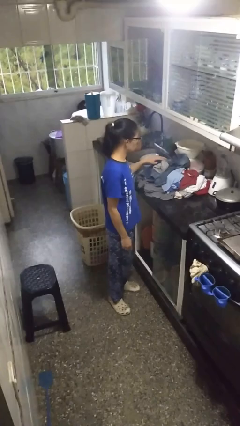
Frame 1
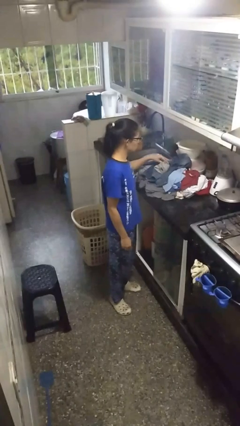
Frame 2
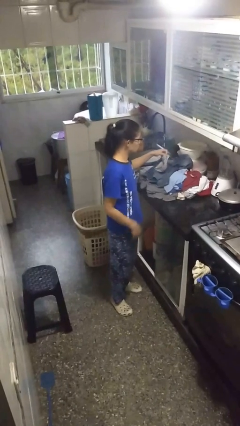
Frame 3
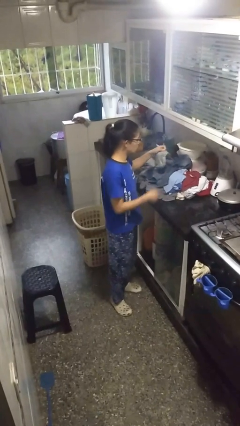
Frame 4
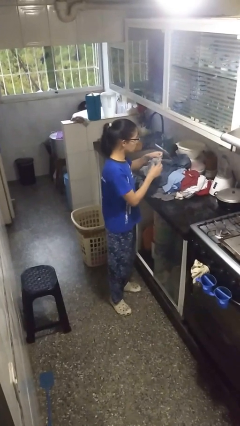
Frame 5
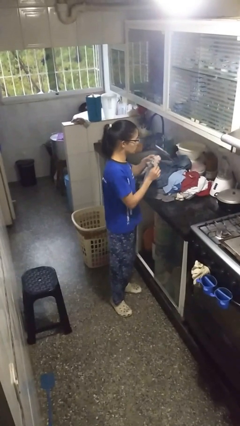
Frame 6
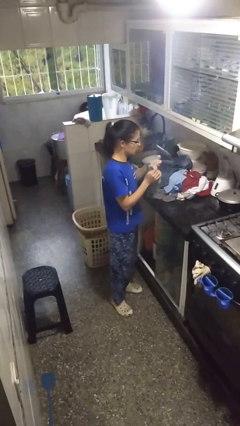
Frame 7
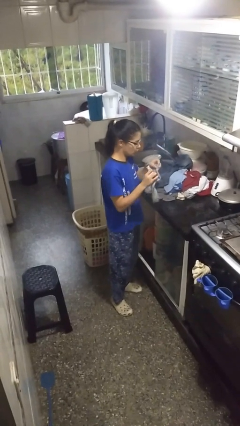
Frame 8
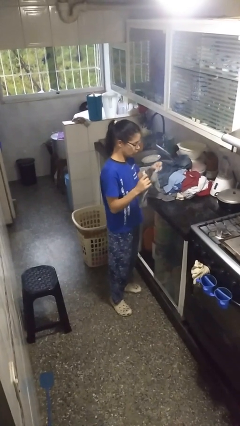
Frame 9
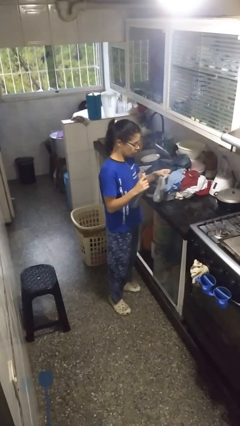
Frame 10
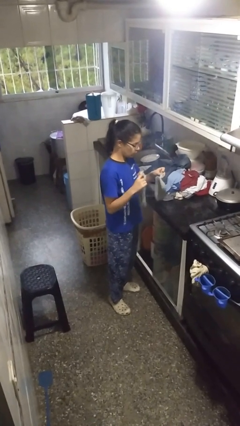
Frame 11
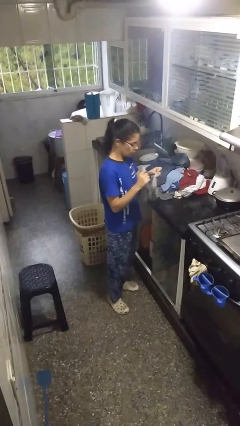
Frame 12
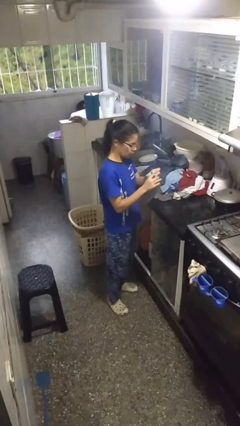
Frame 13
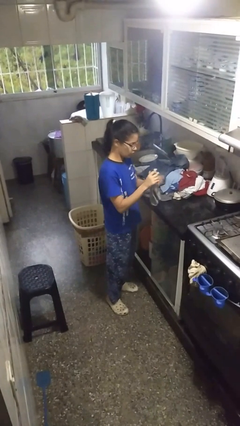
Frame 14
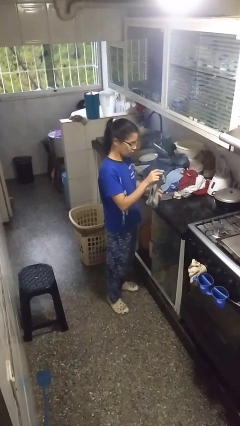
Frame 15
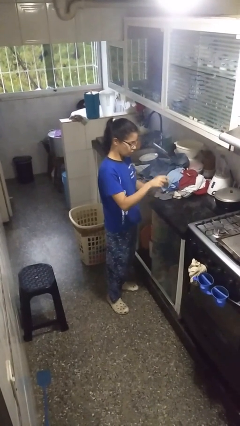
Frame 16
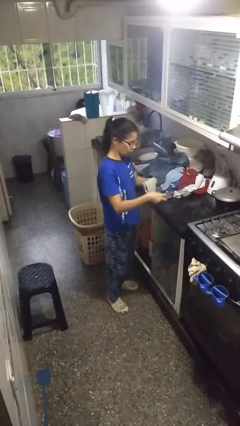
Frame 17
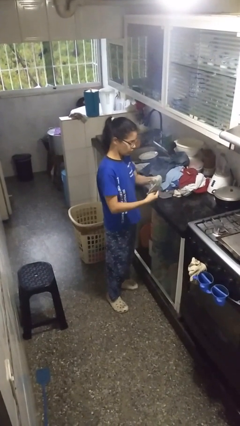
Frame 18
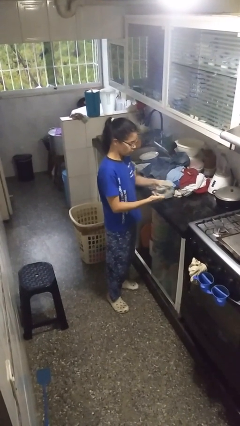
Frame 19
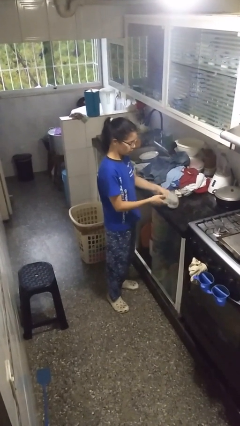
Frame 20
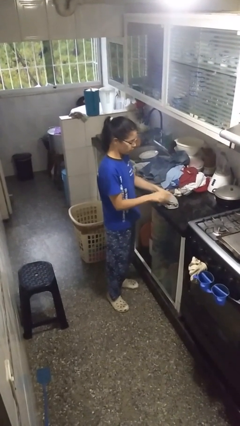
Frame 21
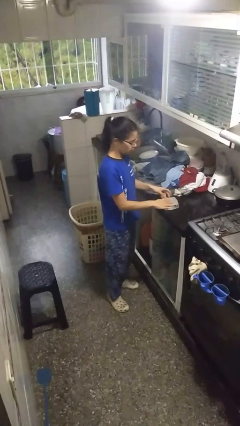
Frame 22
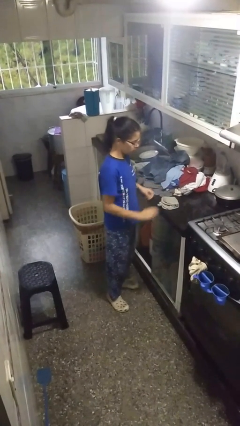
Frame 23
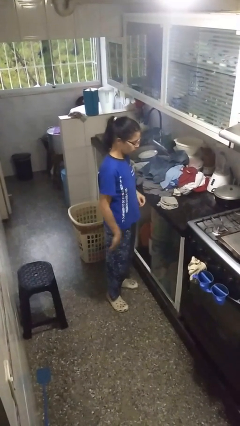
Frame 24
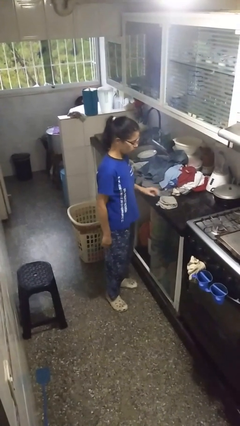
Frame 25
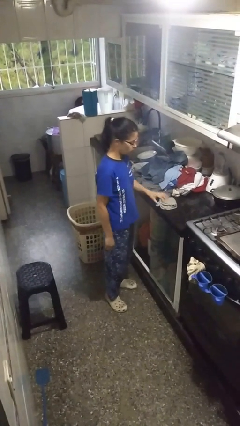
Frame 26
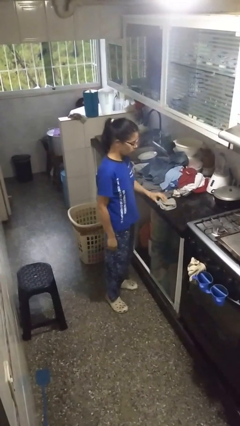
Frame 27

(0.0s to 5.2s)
person folds socks

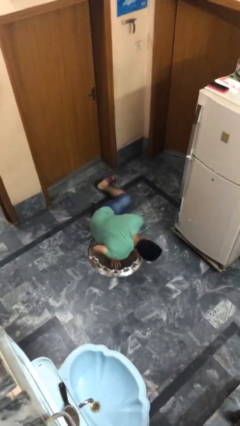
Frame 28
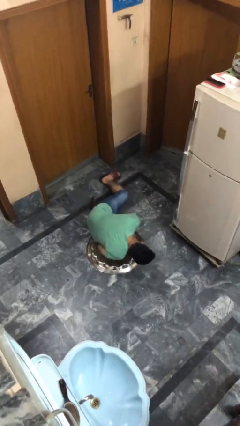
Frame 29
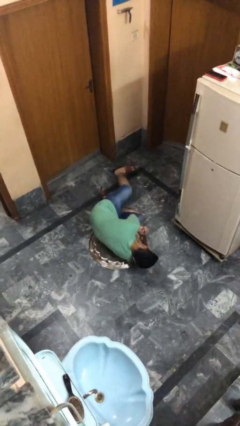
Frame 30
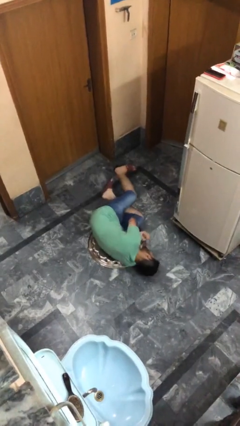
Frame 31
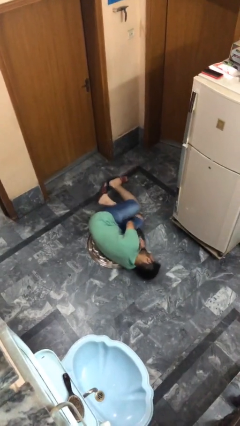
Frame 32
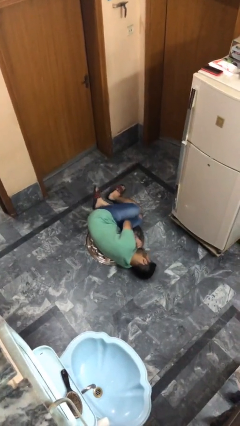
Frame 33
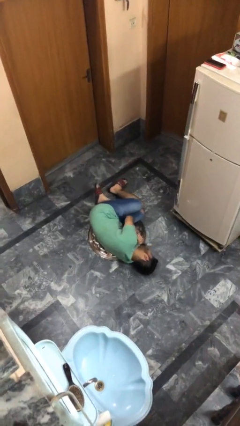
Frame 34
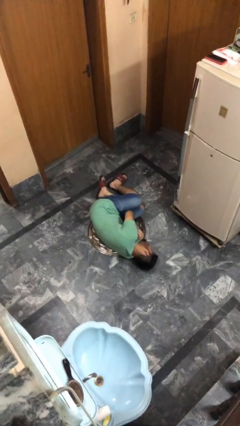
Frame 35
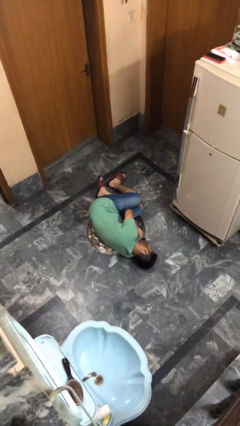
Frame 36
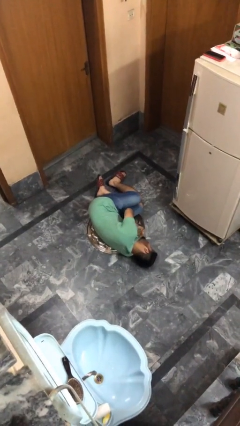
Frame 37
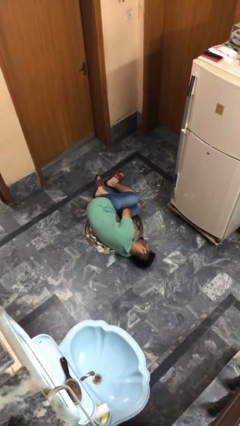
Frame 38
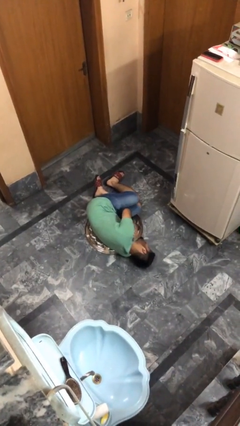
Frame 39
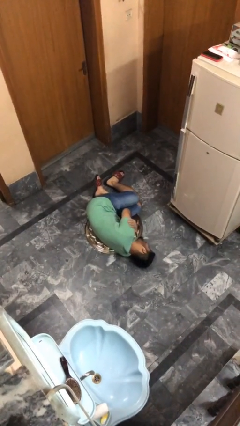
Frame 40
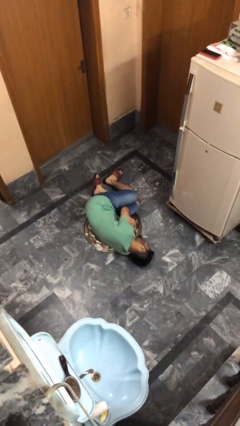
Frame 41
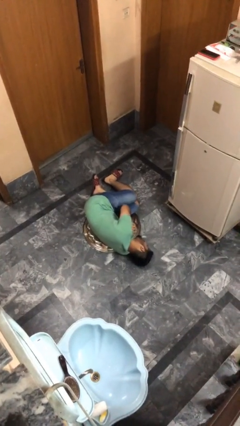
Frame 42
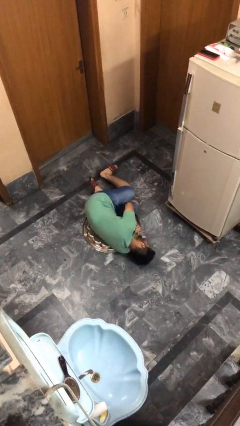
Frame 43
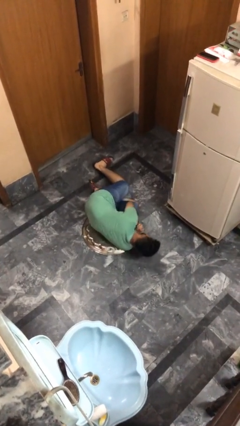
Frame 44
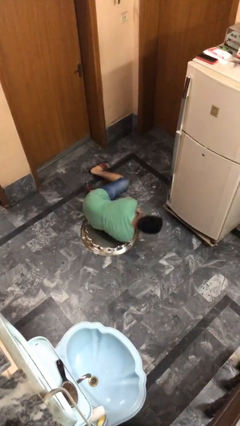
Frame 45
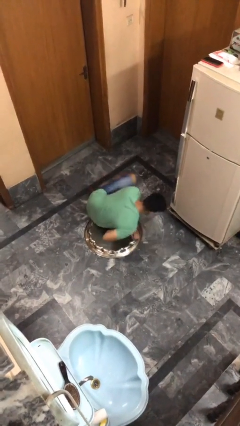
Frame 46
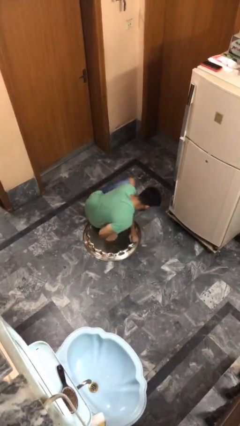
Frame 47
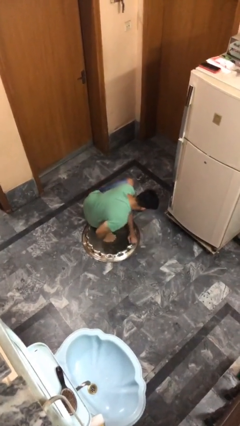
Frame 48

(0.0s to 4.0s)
person lies down on floor

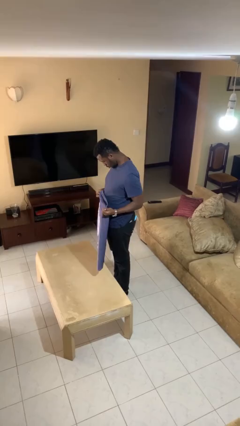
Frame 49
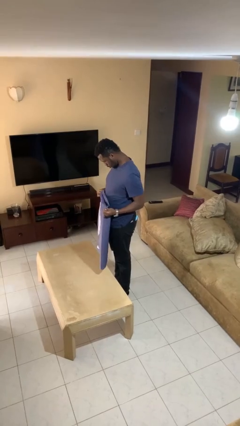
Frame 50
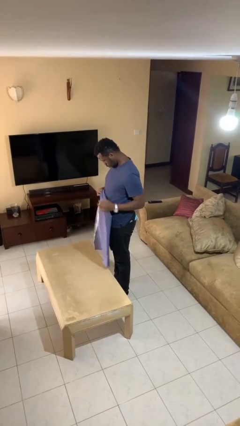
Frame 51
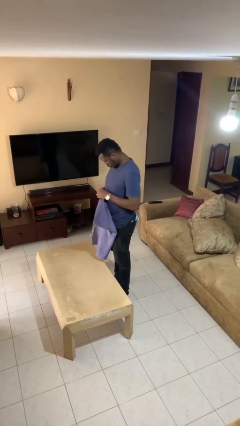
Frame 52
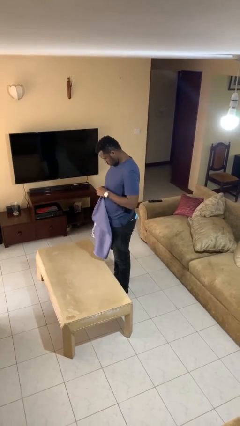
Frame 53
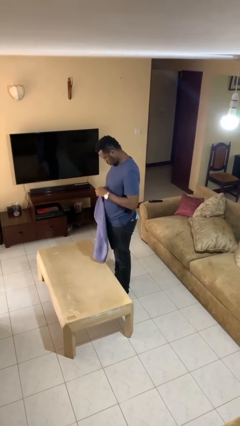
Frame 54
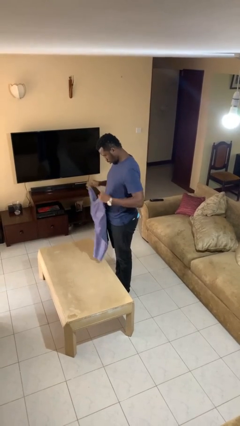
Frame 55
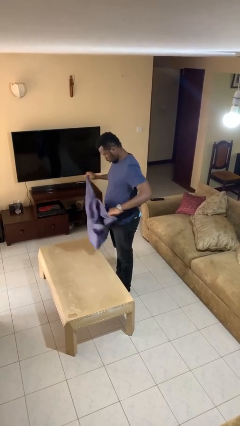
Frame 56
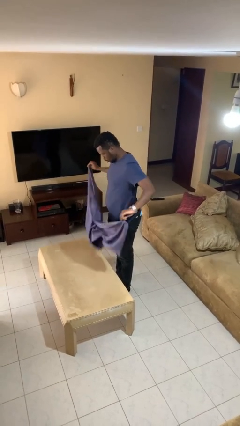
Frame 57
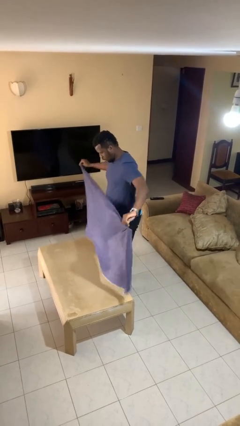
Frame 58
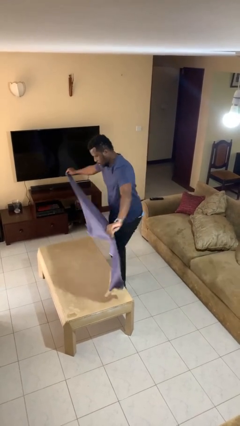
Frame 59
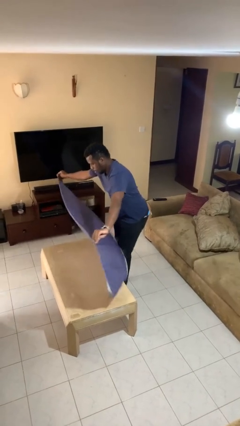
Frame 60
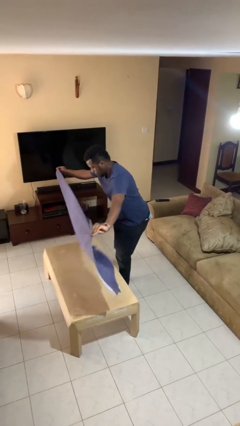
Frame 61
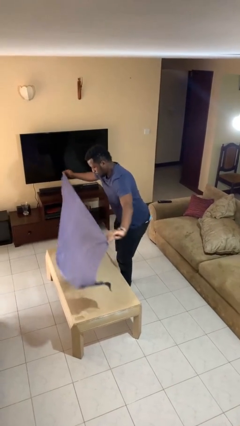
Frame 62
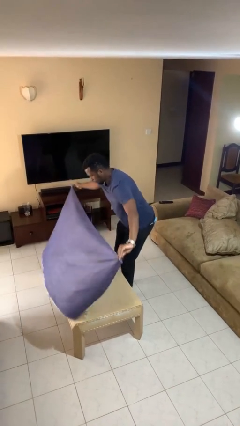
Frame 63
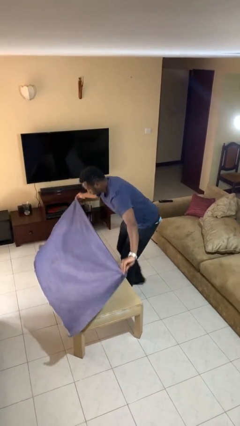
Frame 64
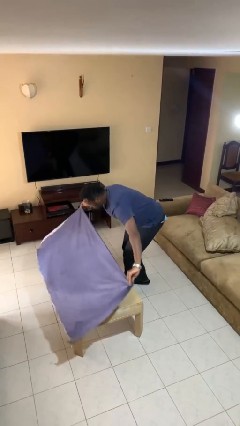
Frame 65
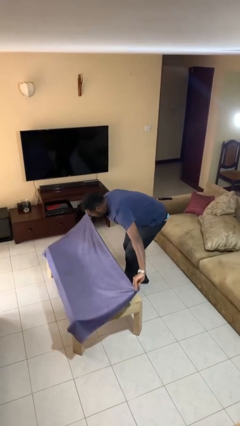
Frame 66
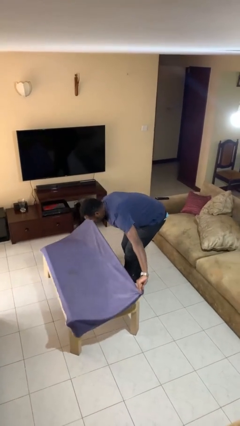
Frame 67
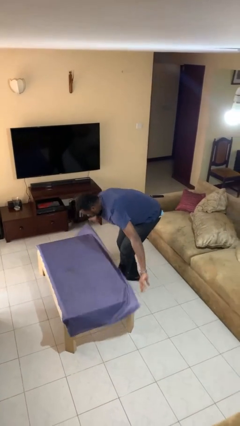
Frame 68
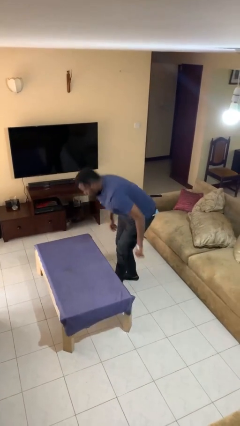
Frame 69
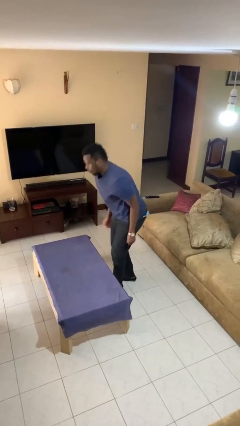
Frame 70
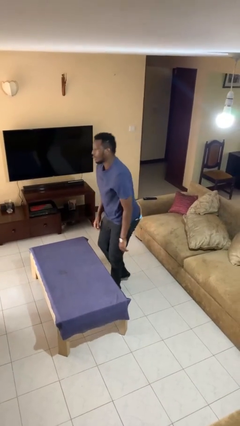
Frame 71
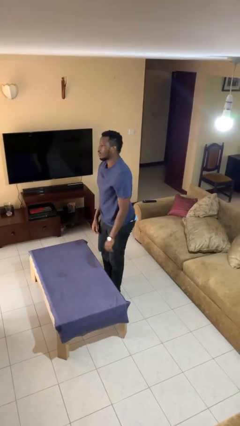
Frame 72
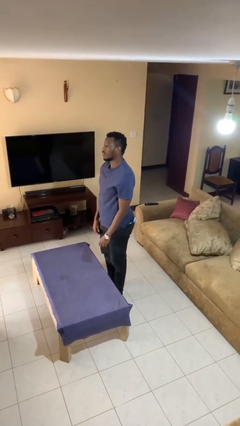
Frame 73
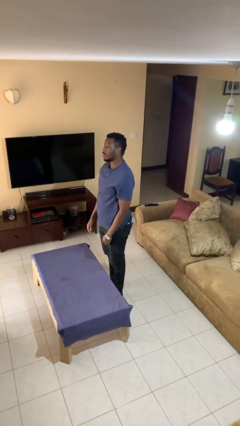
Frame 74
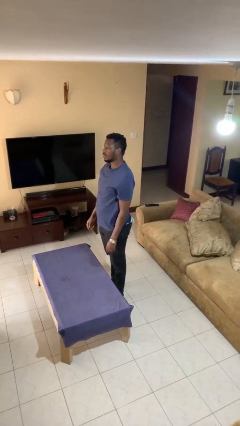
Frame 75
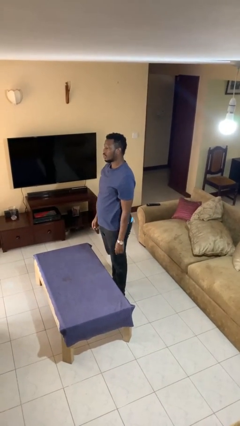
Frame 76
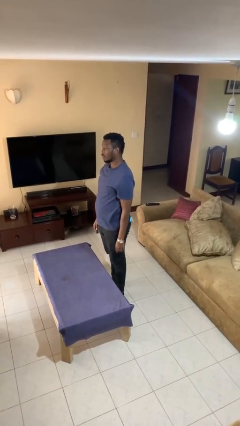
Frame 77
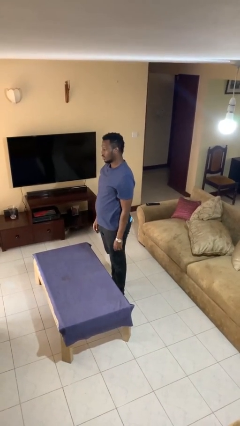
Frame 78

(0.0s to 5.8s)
person spreads tablecloth

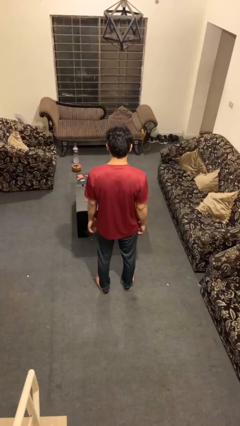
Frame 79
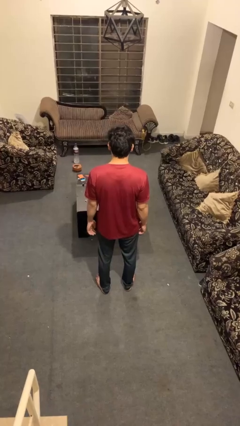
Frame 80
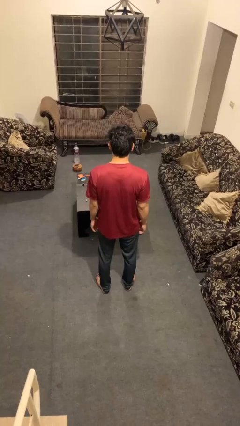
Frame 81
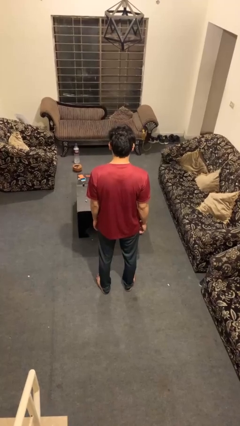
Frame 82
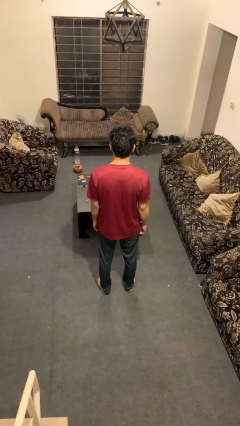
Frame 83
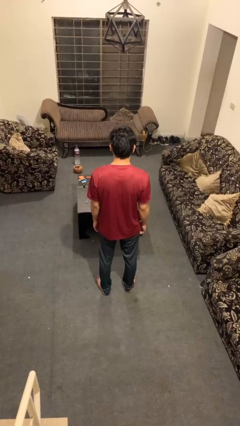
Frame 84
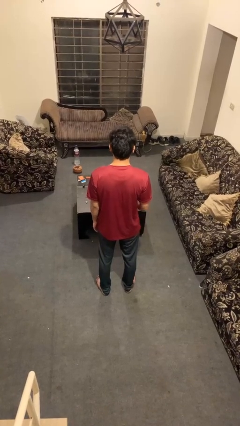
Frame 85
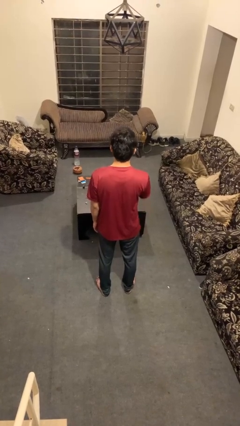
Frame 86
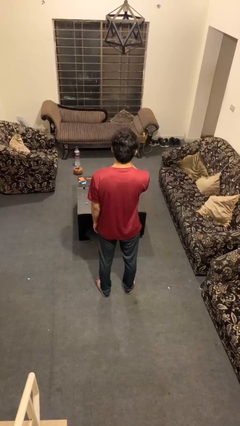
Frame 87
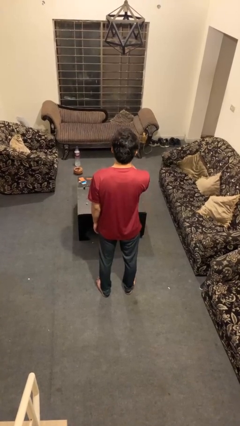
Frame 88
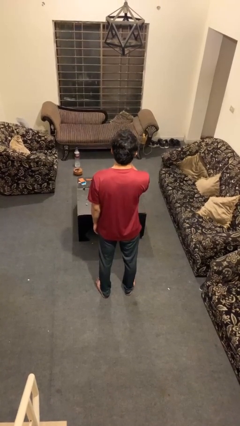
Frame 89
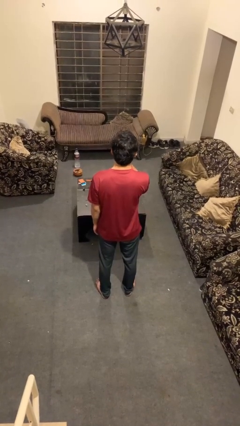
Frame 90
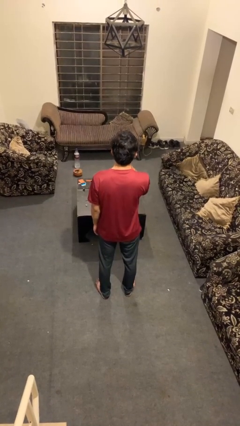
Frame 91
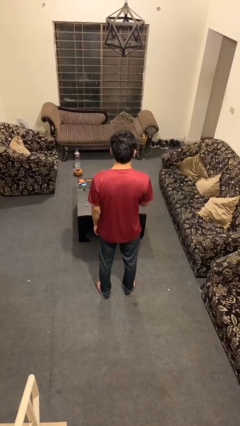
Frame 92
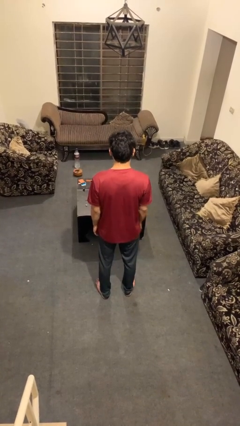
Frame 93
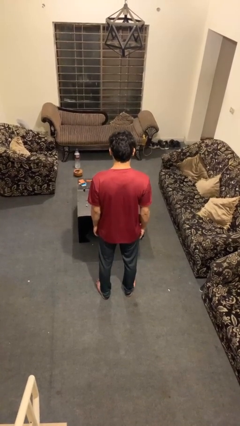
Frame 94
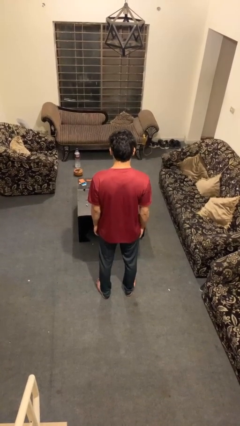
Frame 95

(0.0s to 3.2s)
person gestures be quiet
